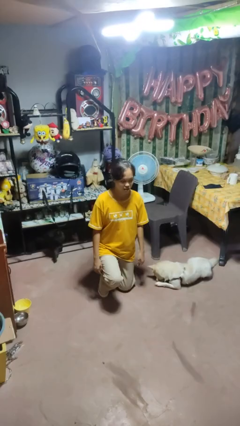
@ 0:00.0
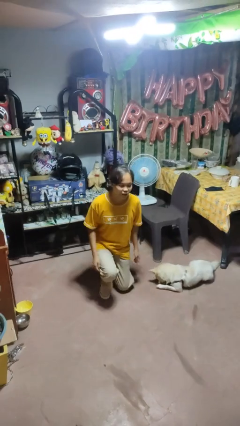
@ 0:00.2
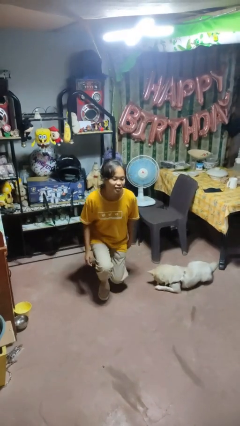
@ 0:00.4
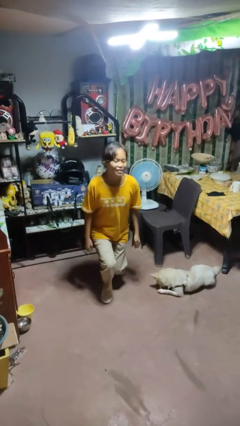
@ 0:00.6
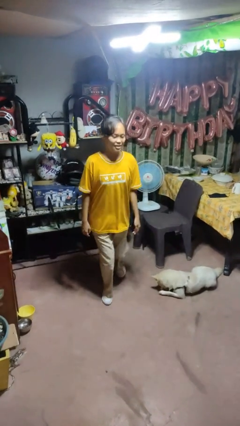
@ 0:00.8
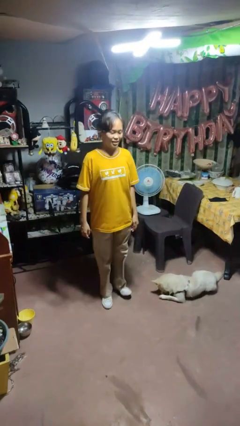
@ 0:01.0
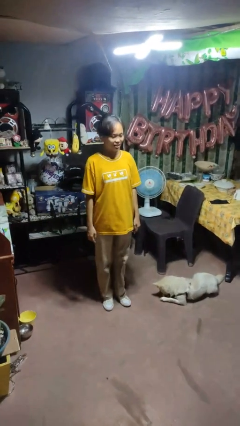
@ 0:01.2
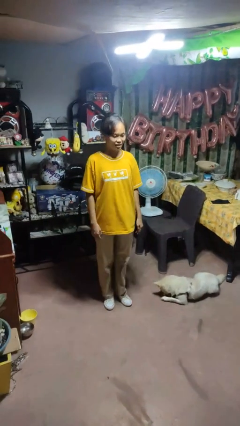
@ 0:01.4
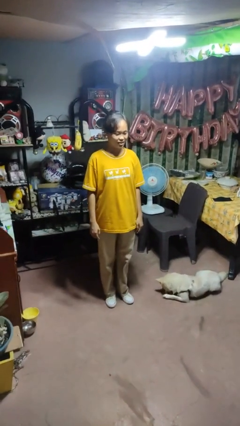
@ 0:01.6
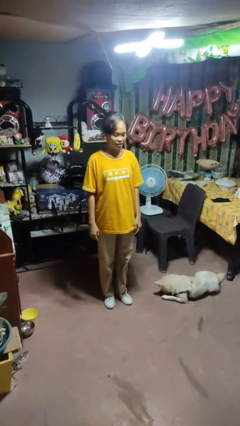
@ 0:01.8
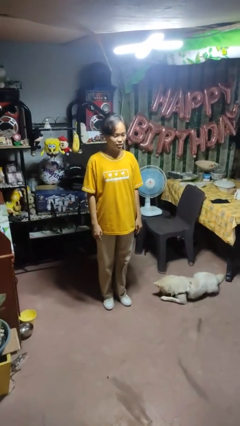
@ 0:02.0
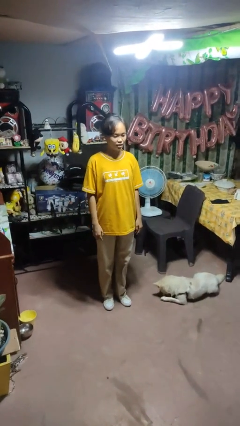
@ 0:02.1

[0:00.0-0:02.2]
person stands up from floor

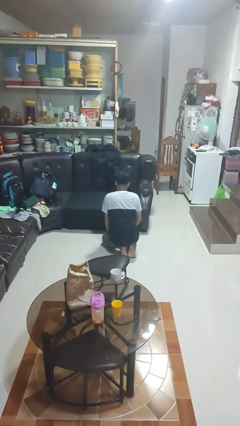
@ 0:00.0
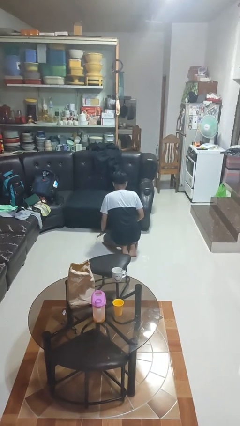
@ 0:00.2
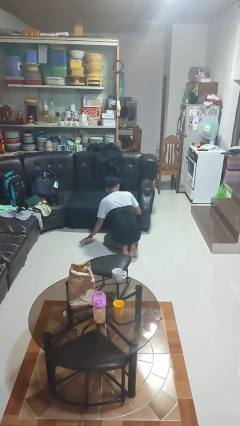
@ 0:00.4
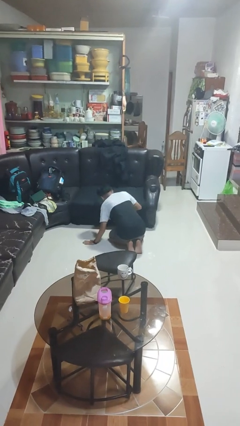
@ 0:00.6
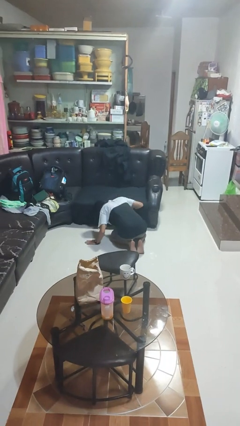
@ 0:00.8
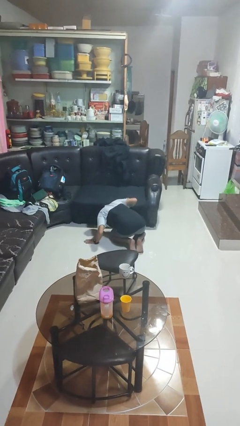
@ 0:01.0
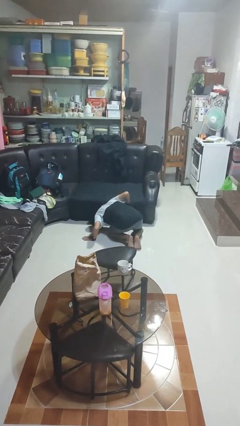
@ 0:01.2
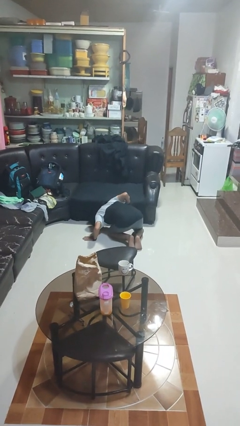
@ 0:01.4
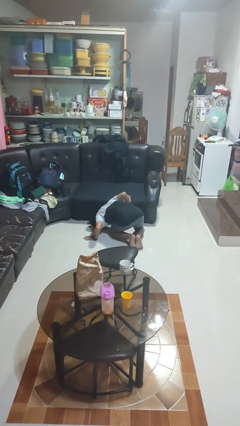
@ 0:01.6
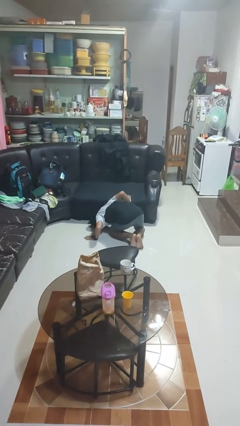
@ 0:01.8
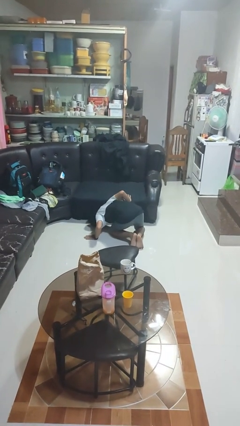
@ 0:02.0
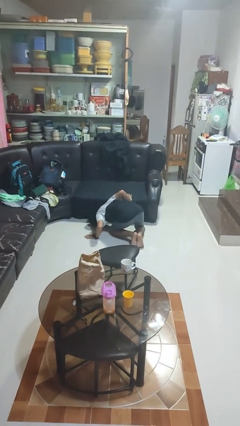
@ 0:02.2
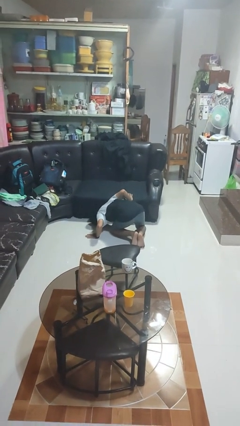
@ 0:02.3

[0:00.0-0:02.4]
person searches under couch

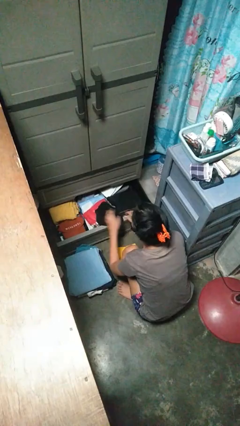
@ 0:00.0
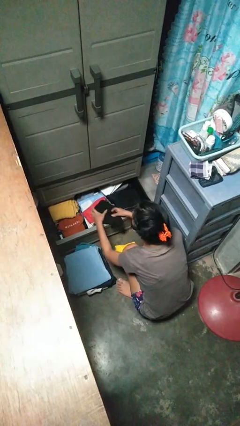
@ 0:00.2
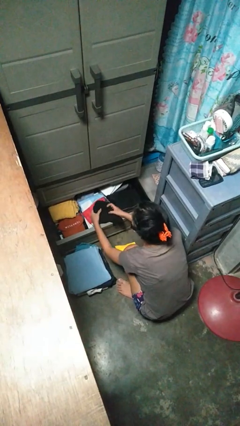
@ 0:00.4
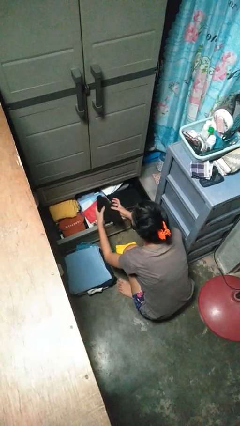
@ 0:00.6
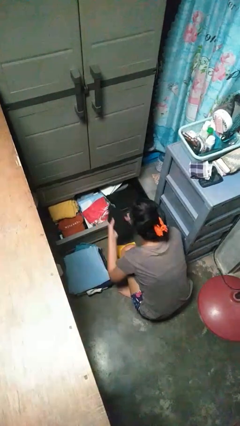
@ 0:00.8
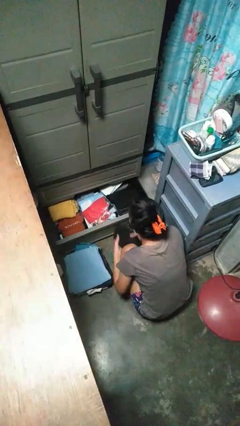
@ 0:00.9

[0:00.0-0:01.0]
person takes clothes from dresser

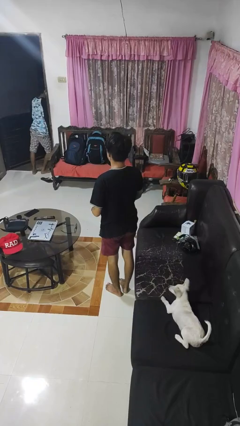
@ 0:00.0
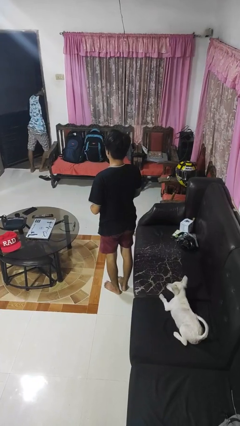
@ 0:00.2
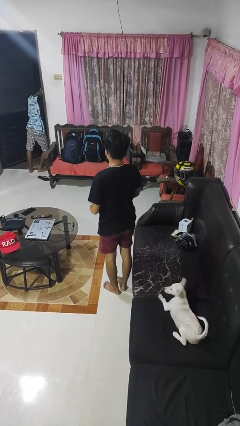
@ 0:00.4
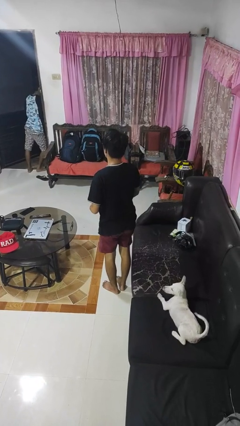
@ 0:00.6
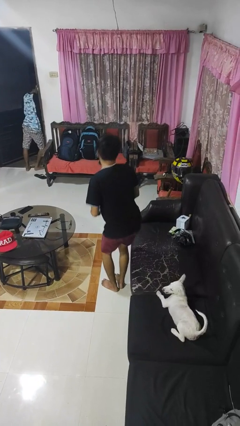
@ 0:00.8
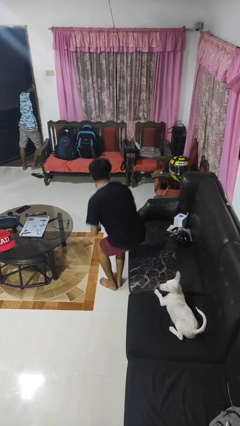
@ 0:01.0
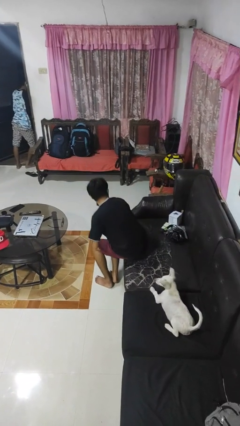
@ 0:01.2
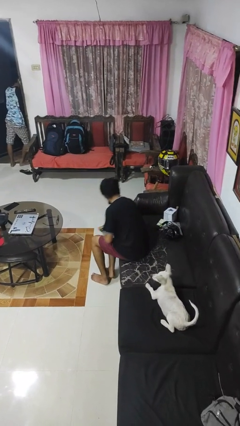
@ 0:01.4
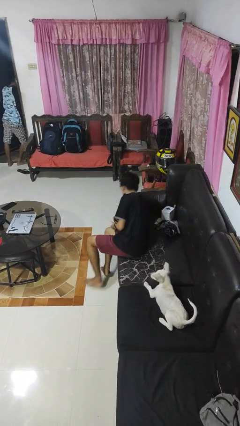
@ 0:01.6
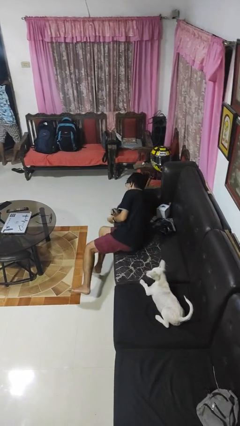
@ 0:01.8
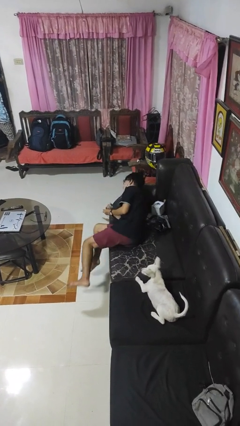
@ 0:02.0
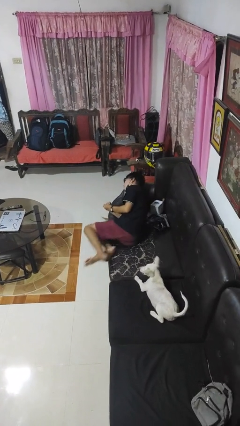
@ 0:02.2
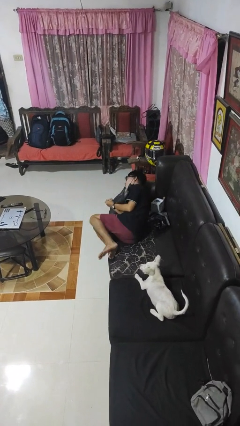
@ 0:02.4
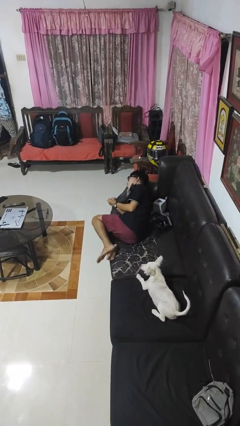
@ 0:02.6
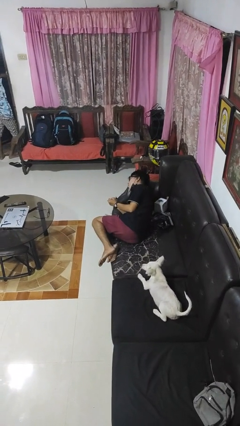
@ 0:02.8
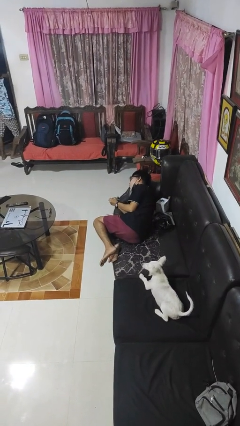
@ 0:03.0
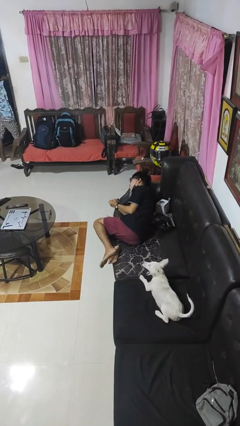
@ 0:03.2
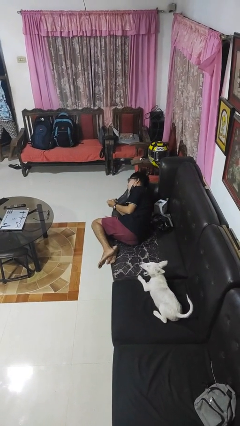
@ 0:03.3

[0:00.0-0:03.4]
person lies down on couch

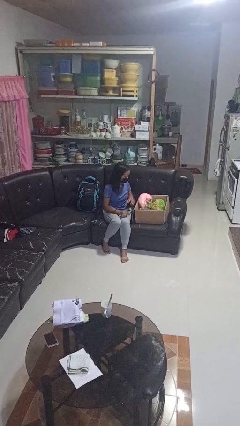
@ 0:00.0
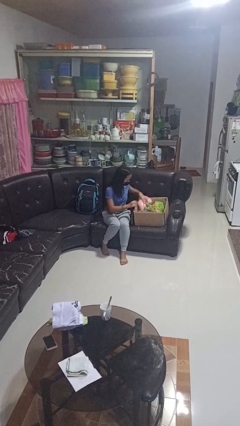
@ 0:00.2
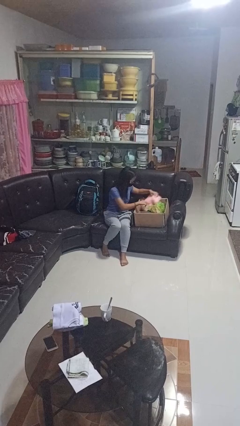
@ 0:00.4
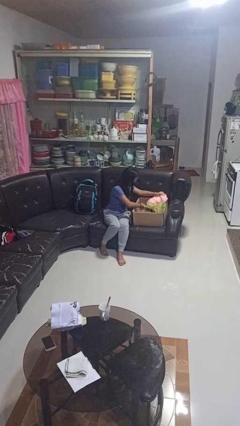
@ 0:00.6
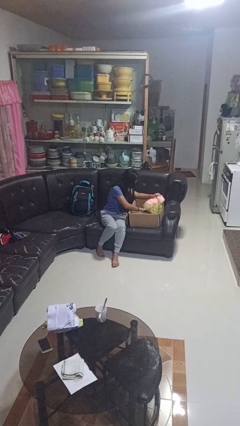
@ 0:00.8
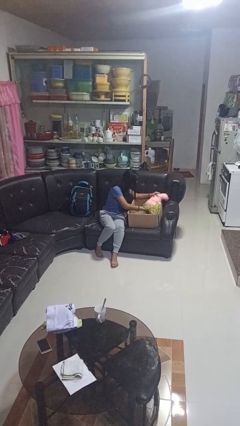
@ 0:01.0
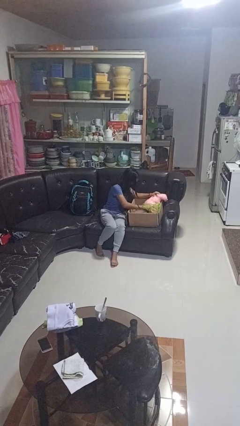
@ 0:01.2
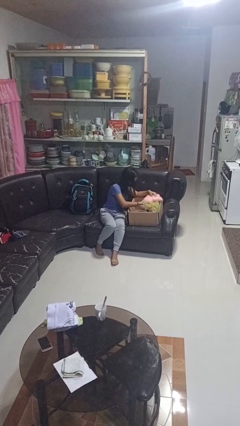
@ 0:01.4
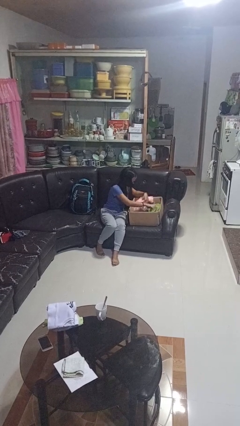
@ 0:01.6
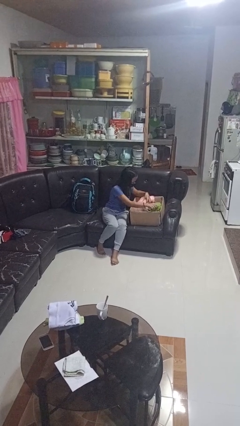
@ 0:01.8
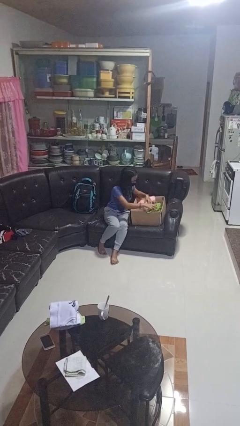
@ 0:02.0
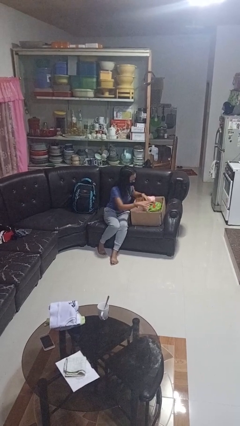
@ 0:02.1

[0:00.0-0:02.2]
person searches in box

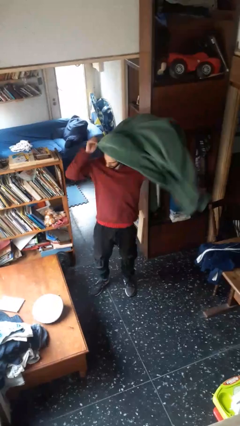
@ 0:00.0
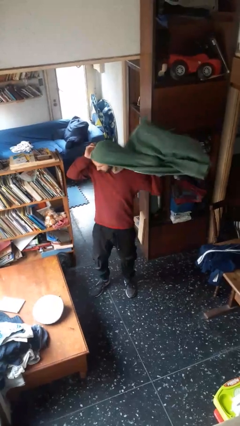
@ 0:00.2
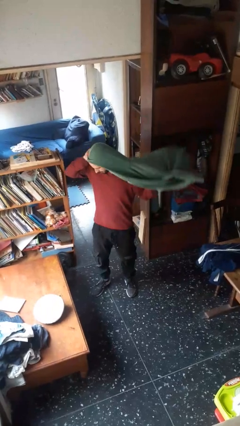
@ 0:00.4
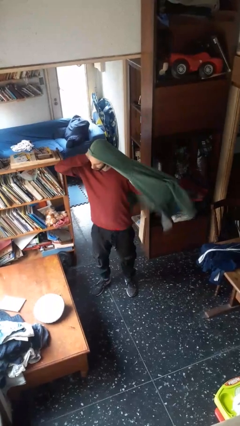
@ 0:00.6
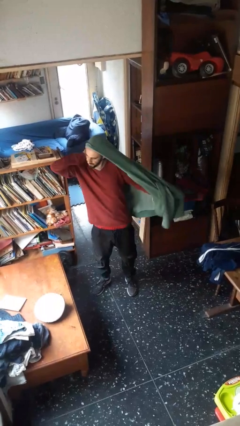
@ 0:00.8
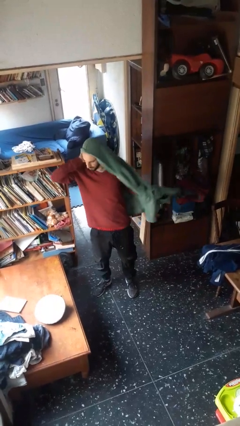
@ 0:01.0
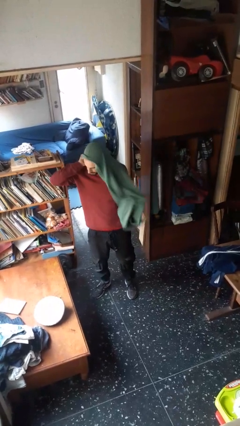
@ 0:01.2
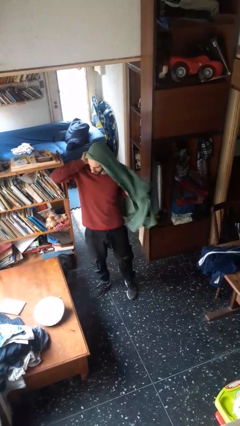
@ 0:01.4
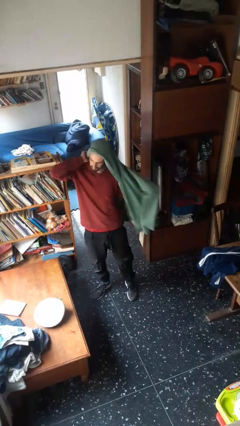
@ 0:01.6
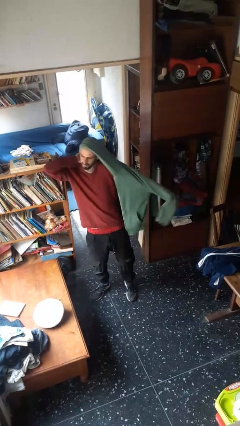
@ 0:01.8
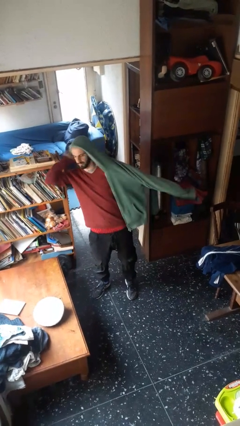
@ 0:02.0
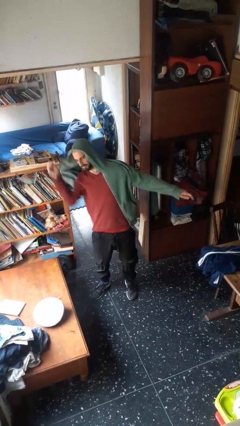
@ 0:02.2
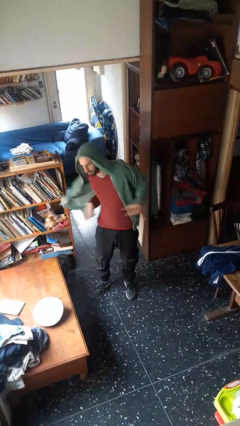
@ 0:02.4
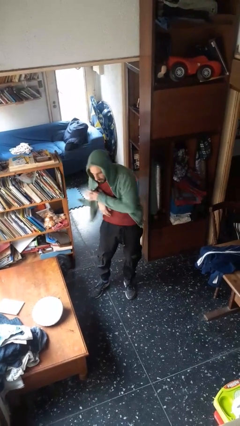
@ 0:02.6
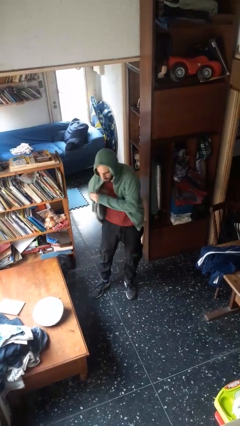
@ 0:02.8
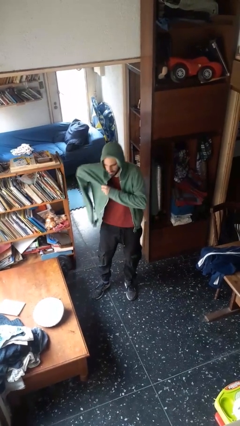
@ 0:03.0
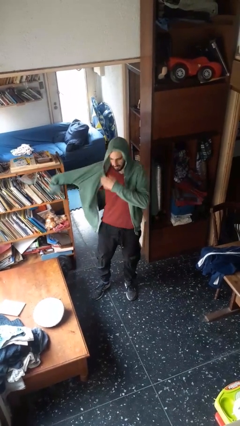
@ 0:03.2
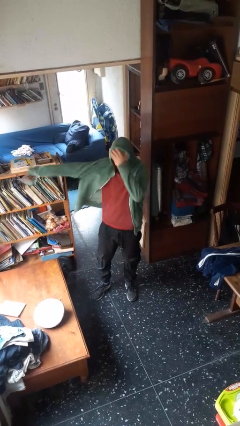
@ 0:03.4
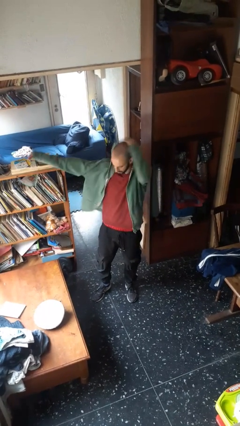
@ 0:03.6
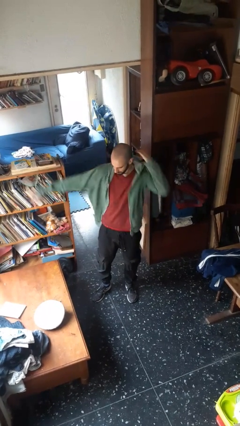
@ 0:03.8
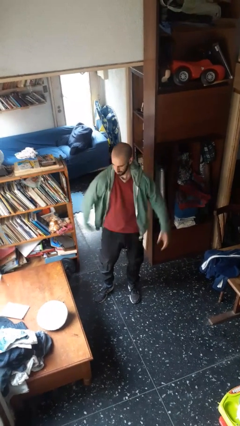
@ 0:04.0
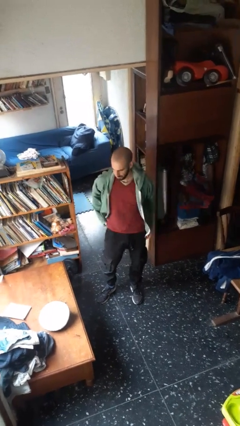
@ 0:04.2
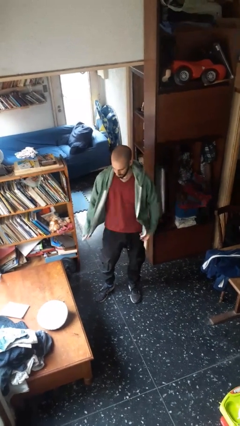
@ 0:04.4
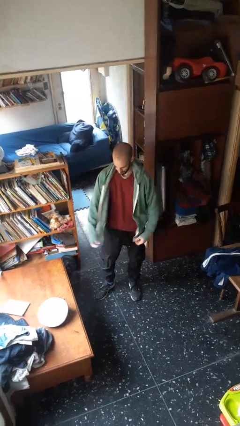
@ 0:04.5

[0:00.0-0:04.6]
person puts on jacket

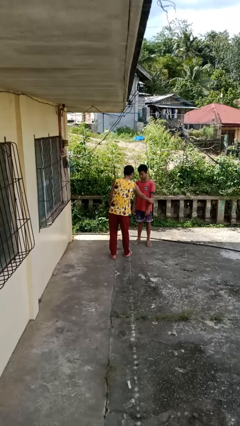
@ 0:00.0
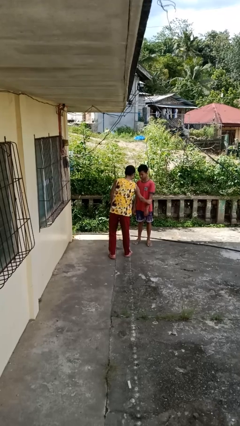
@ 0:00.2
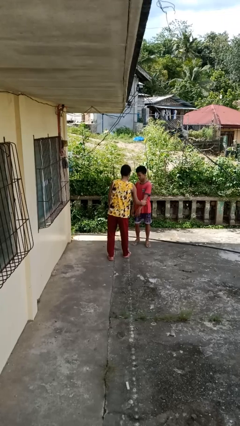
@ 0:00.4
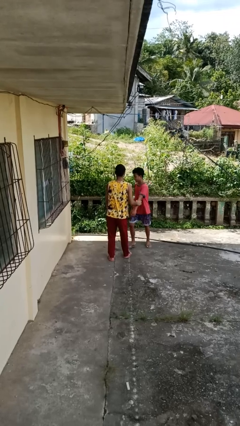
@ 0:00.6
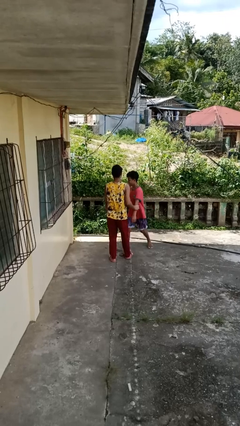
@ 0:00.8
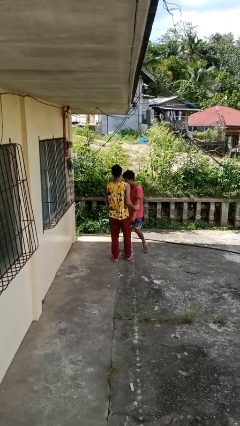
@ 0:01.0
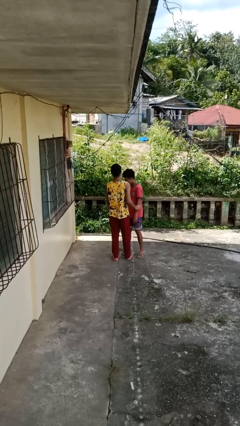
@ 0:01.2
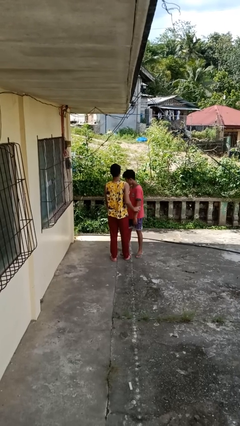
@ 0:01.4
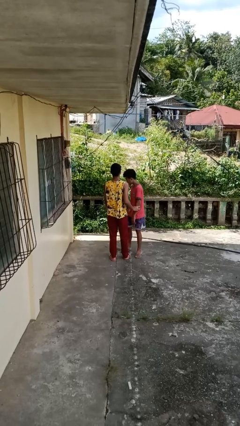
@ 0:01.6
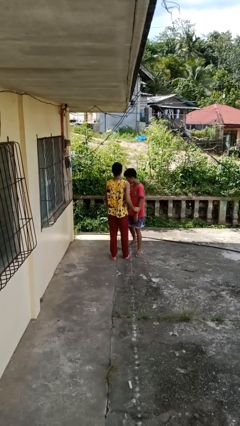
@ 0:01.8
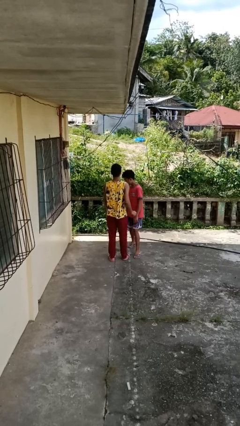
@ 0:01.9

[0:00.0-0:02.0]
person grabs person by forearm
